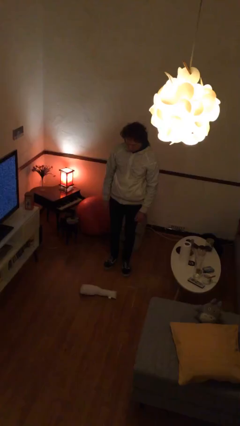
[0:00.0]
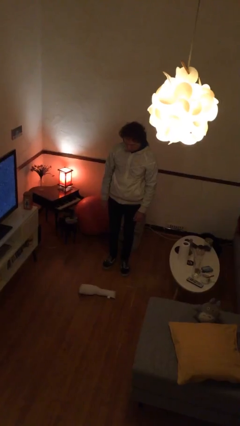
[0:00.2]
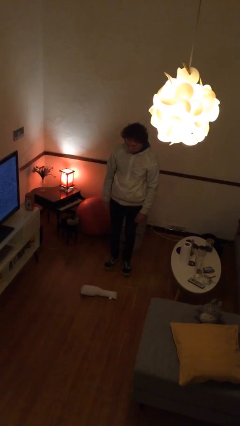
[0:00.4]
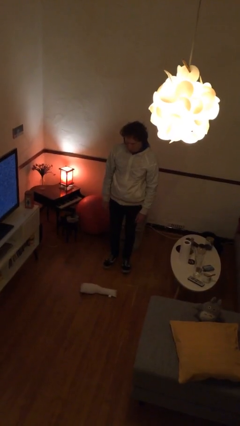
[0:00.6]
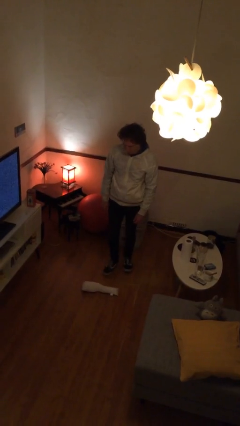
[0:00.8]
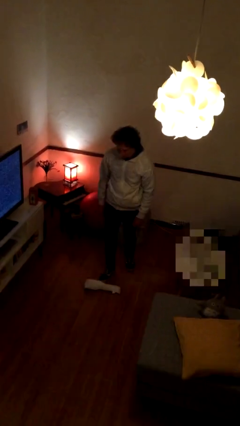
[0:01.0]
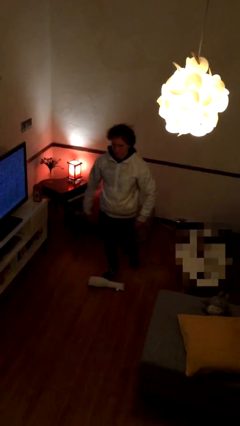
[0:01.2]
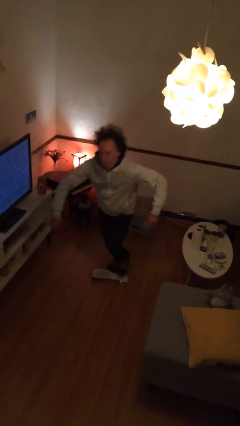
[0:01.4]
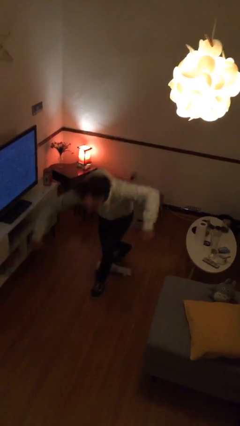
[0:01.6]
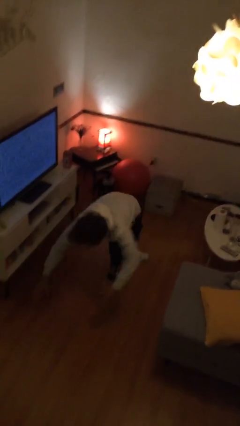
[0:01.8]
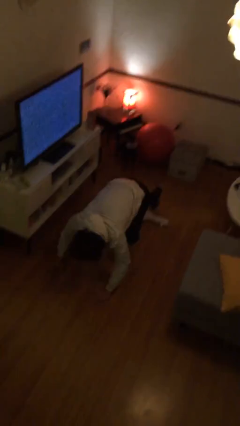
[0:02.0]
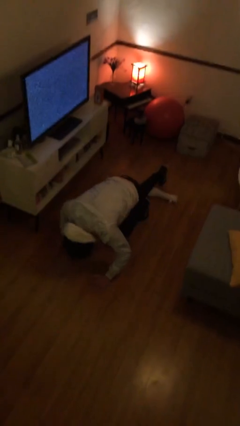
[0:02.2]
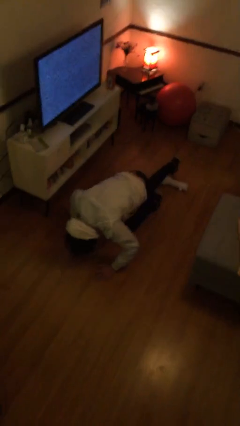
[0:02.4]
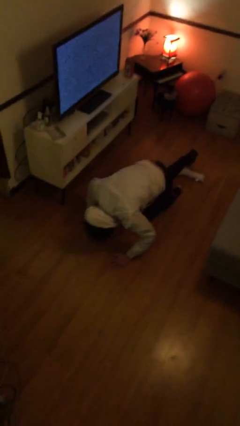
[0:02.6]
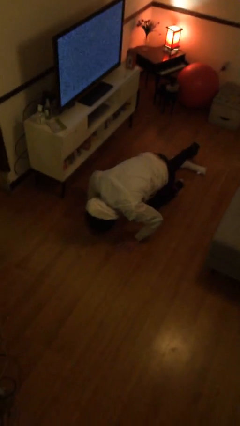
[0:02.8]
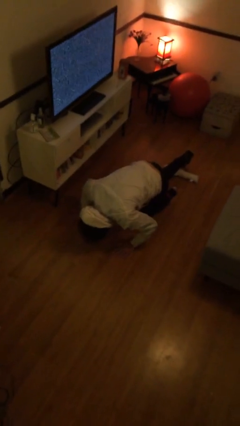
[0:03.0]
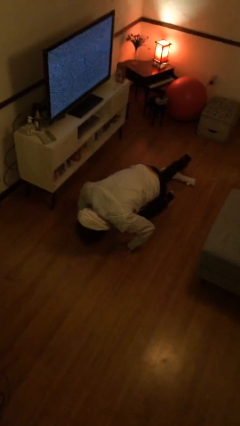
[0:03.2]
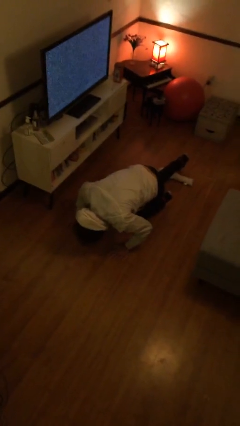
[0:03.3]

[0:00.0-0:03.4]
person trips on object on floor

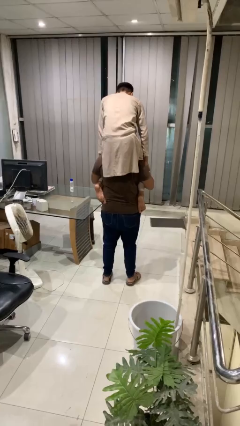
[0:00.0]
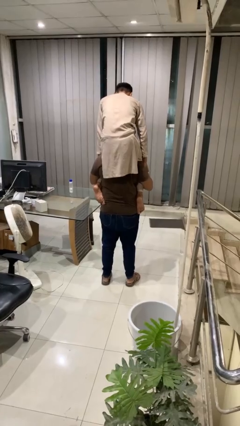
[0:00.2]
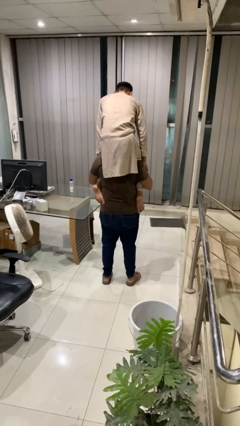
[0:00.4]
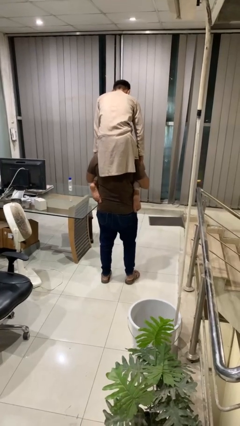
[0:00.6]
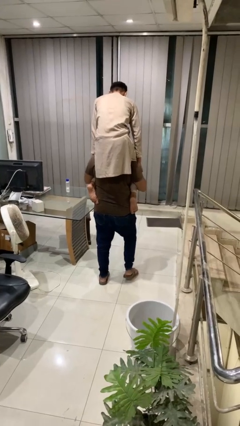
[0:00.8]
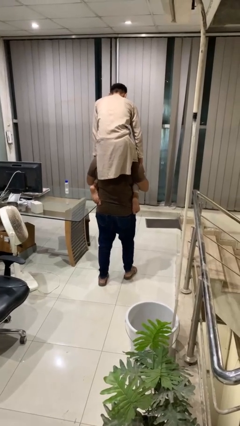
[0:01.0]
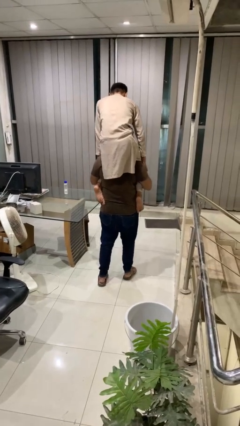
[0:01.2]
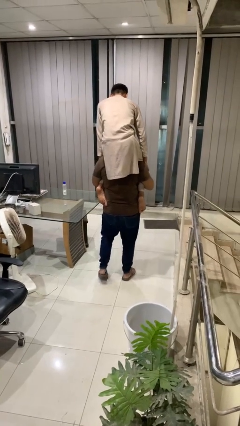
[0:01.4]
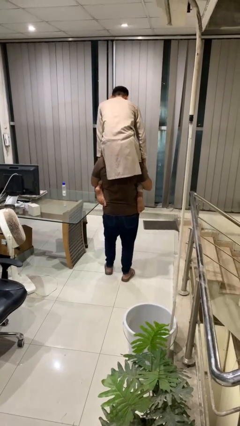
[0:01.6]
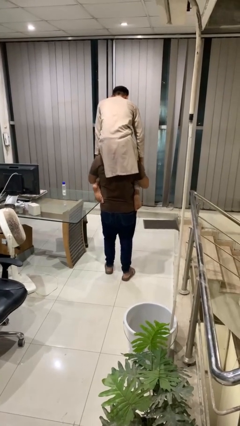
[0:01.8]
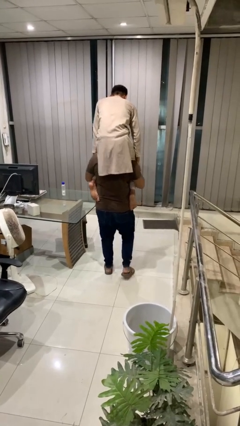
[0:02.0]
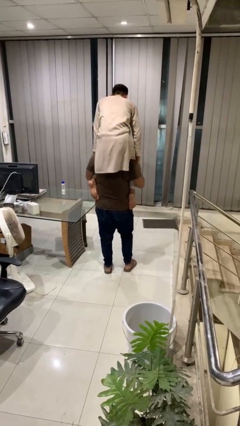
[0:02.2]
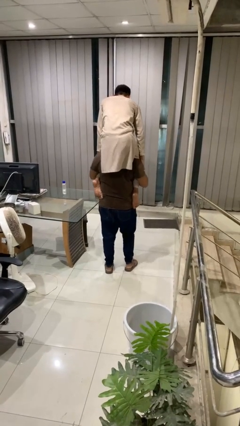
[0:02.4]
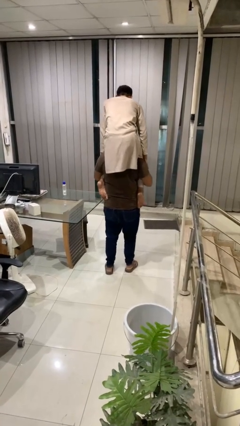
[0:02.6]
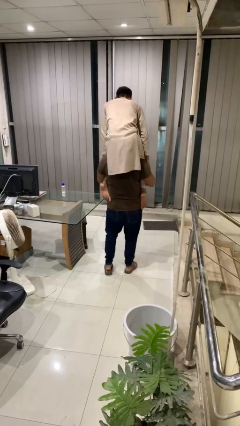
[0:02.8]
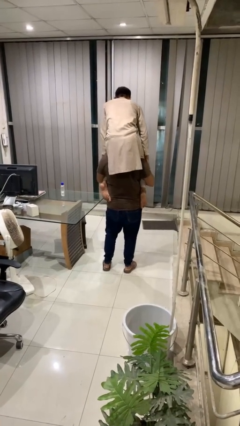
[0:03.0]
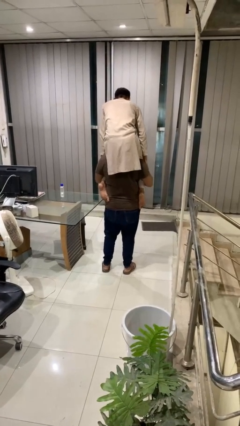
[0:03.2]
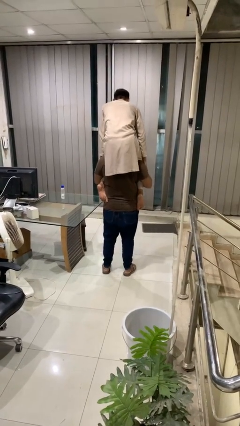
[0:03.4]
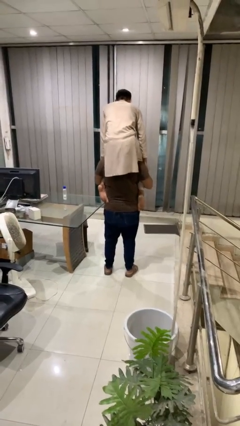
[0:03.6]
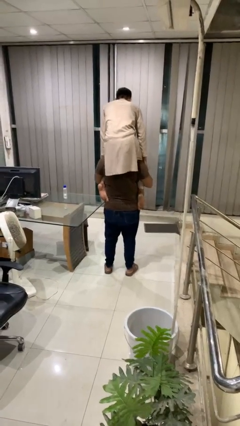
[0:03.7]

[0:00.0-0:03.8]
person carries person on shoulders

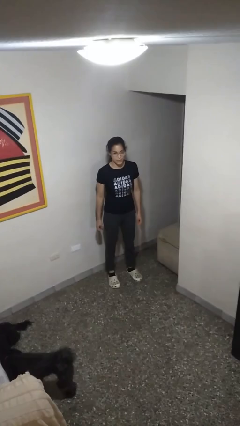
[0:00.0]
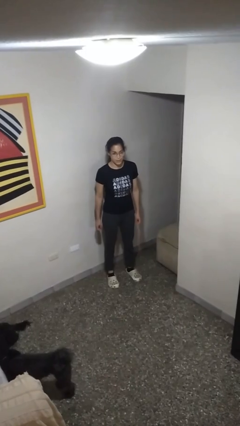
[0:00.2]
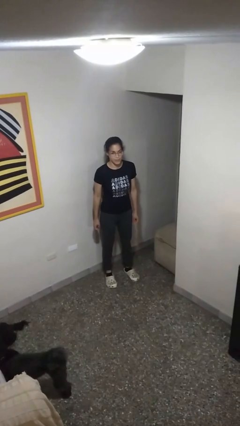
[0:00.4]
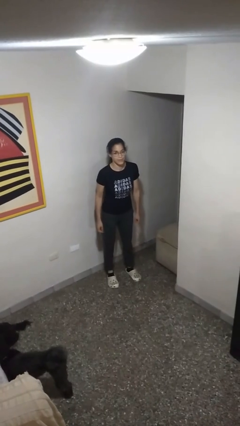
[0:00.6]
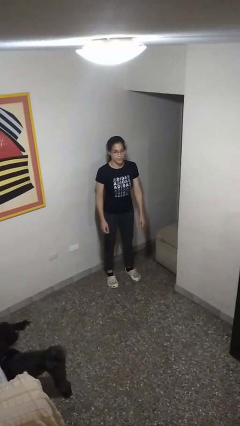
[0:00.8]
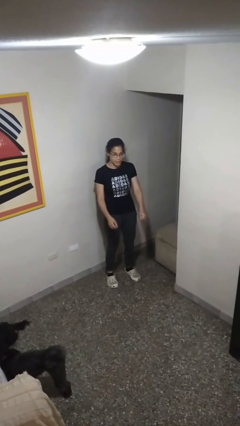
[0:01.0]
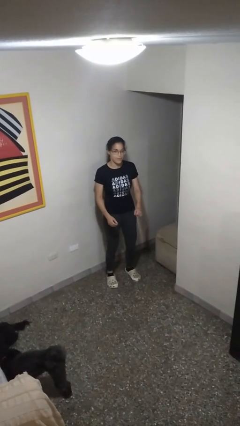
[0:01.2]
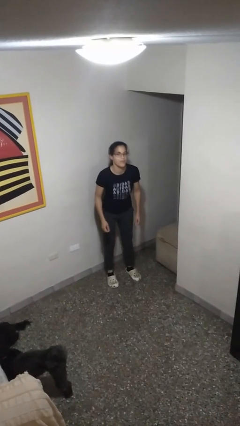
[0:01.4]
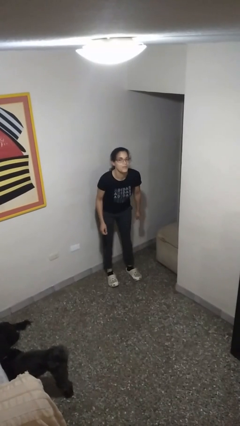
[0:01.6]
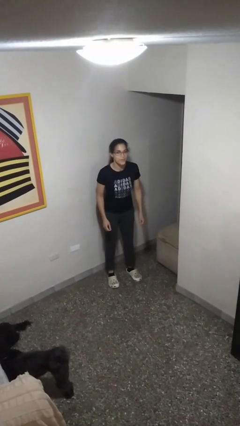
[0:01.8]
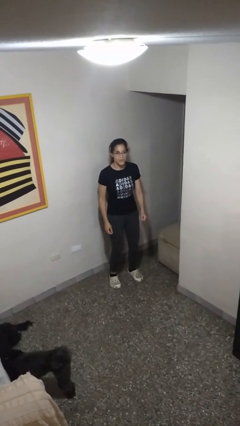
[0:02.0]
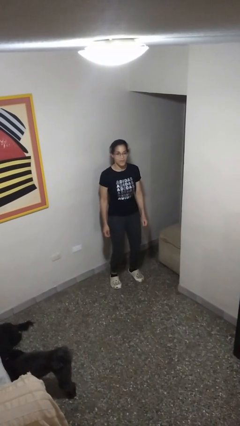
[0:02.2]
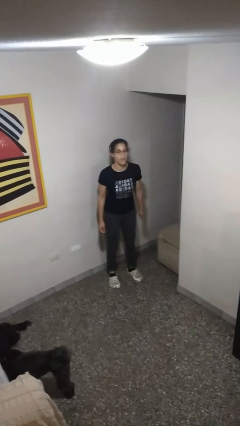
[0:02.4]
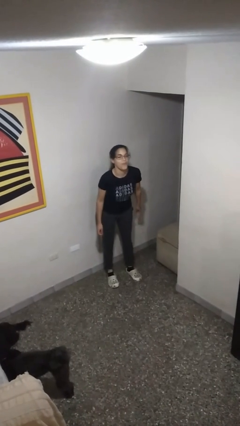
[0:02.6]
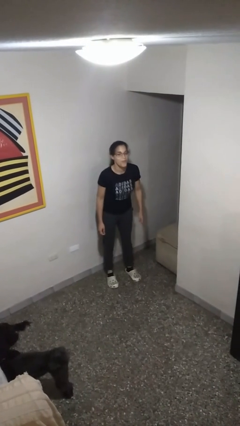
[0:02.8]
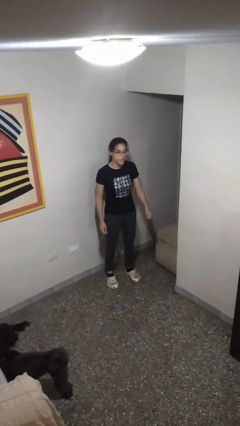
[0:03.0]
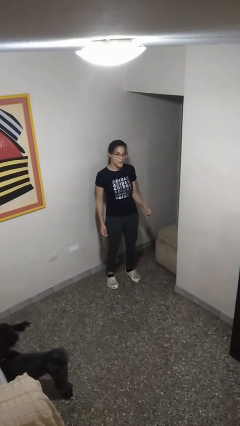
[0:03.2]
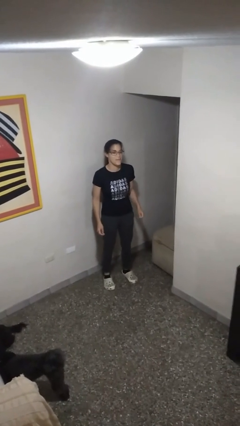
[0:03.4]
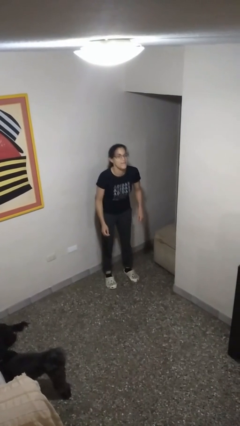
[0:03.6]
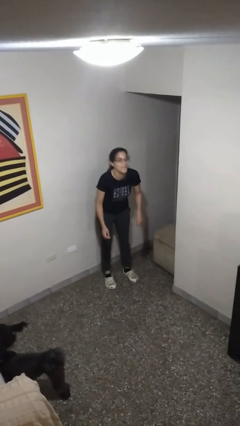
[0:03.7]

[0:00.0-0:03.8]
person wiggles hips

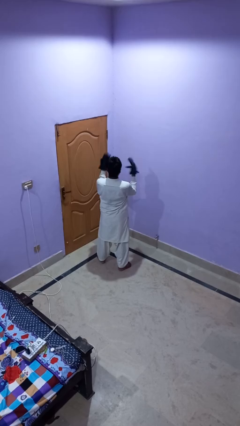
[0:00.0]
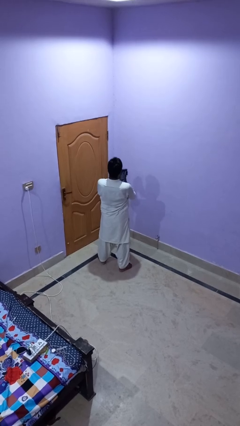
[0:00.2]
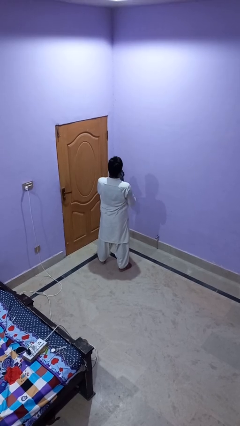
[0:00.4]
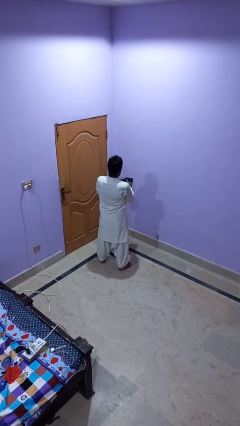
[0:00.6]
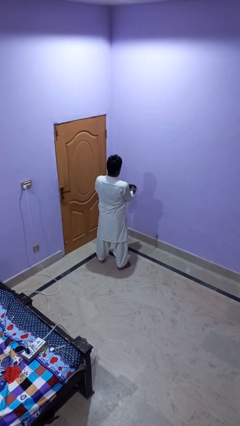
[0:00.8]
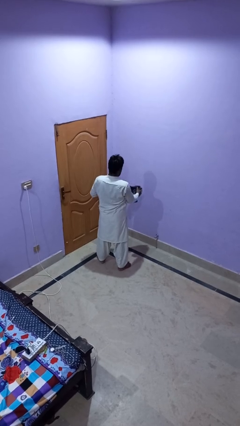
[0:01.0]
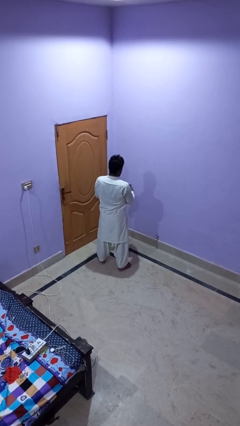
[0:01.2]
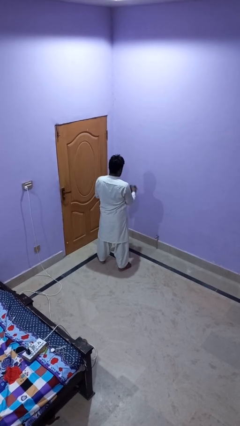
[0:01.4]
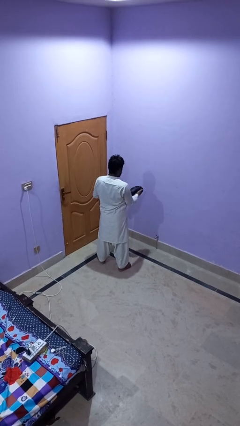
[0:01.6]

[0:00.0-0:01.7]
person takes off gloves

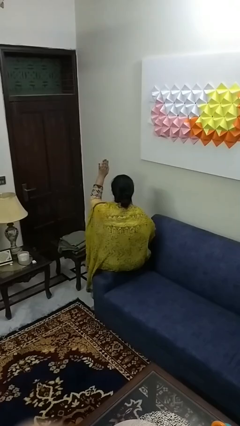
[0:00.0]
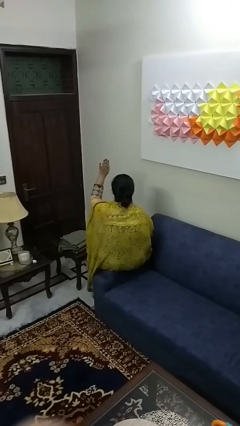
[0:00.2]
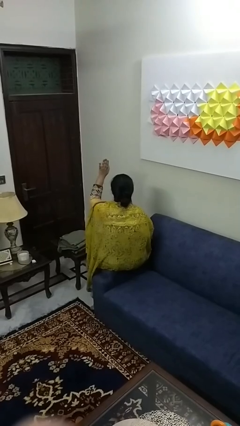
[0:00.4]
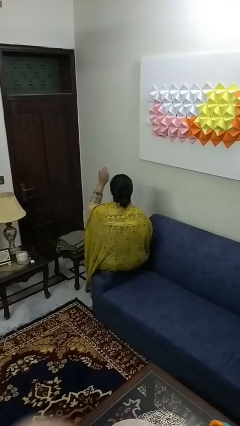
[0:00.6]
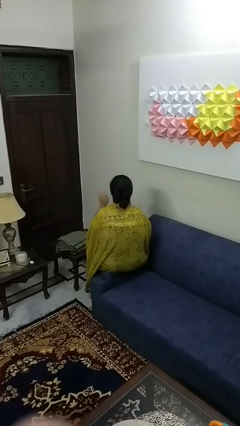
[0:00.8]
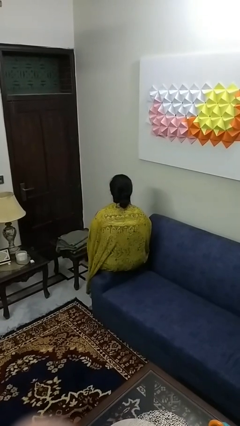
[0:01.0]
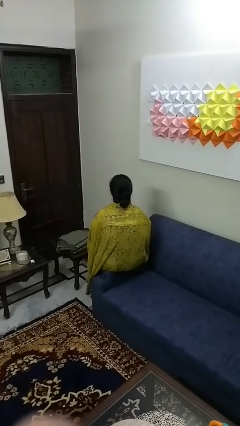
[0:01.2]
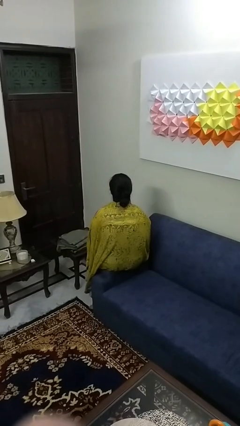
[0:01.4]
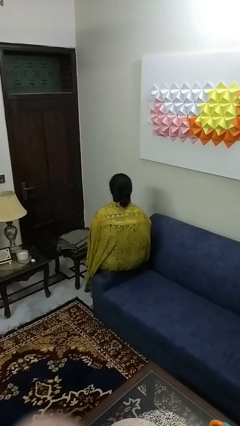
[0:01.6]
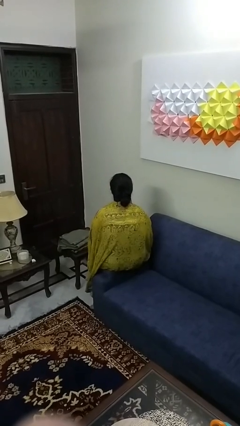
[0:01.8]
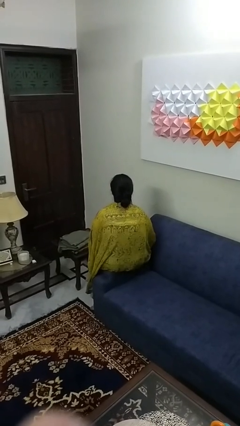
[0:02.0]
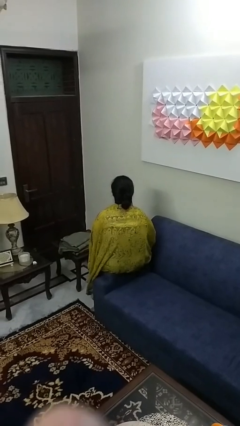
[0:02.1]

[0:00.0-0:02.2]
person gestures lower hand

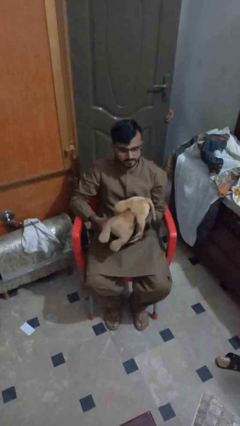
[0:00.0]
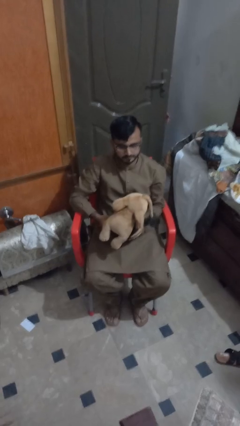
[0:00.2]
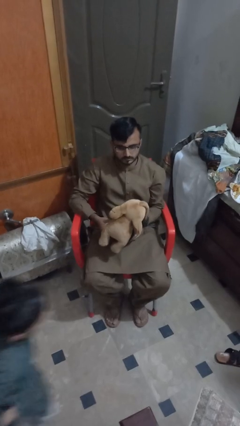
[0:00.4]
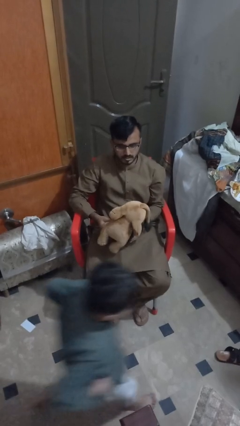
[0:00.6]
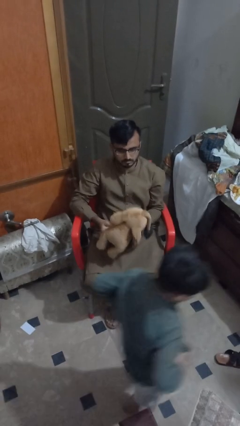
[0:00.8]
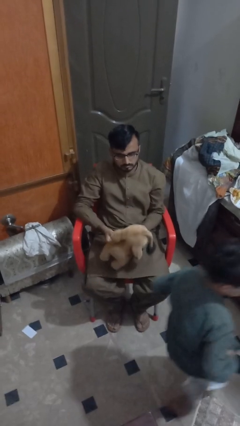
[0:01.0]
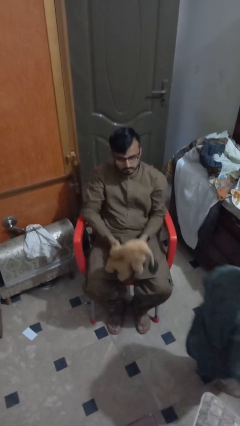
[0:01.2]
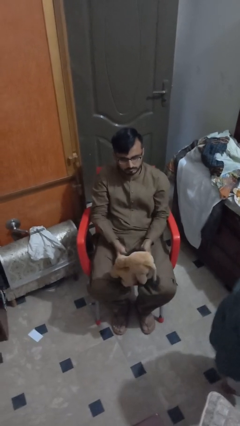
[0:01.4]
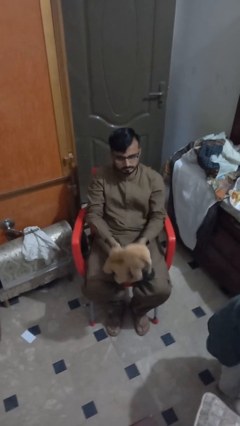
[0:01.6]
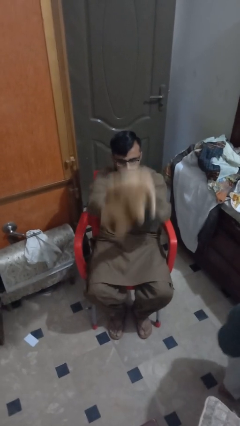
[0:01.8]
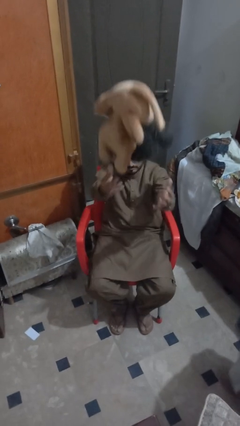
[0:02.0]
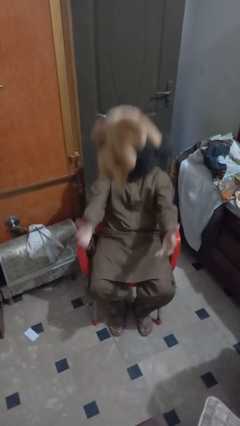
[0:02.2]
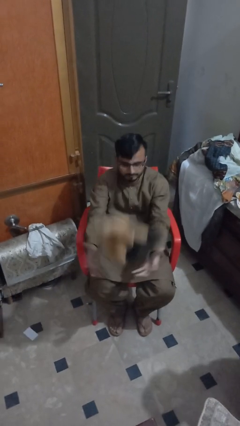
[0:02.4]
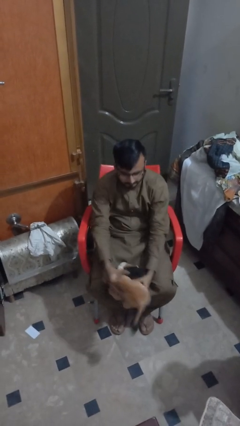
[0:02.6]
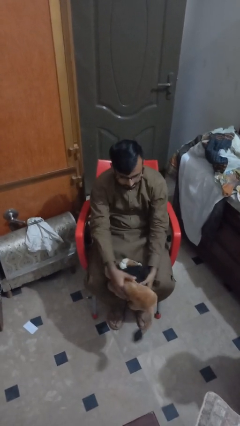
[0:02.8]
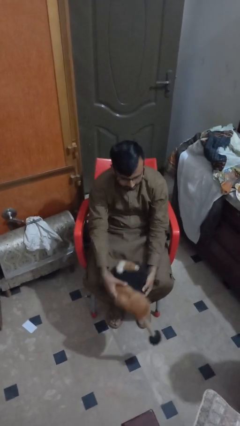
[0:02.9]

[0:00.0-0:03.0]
person drops object
